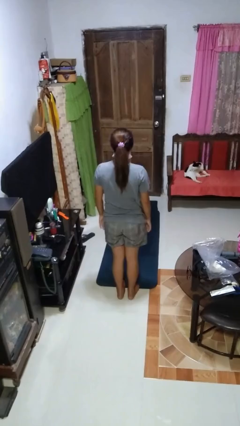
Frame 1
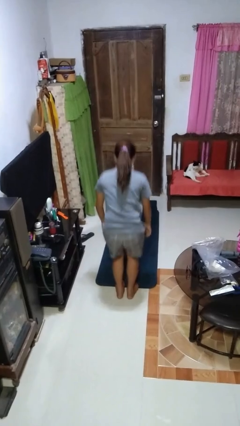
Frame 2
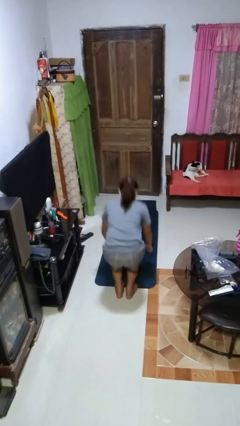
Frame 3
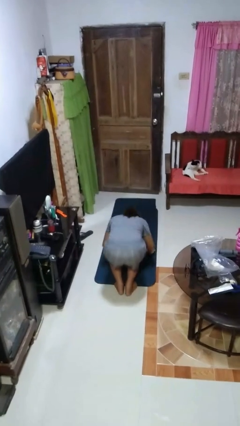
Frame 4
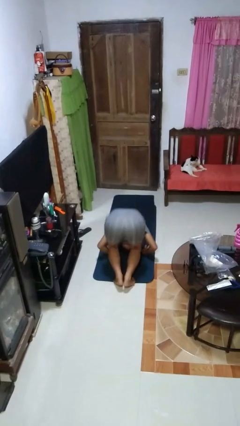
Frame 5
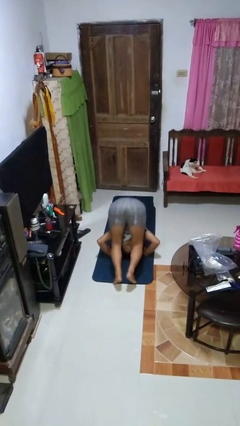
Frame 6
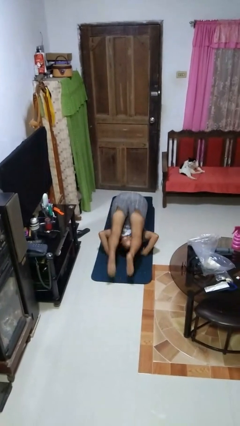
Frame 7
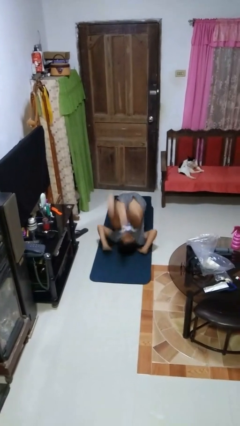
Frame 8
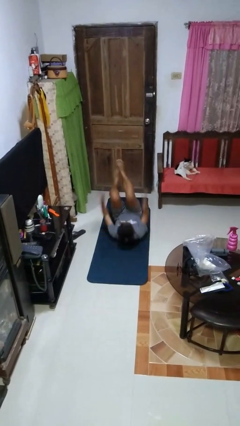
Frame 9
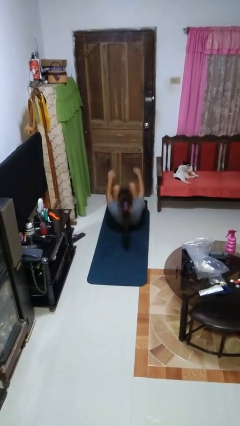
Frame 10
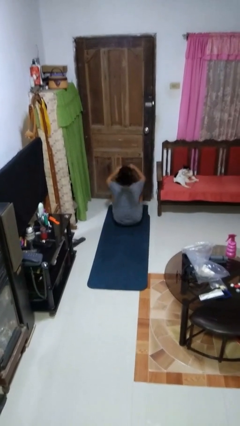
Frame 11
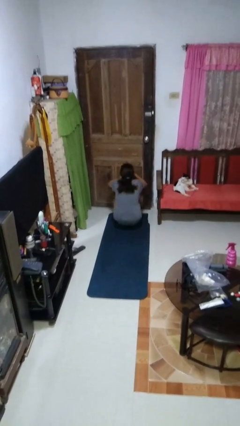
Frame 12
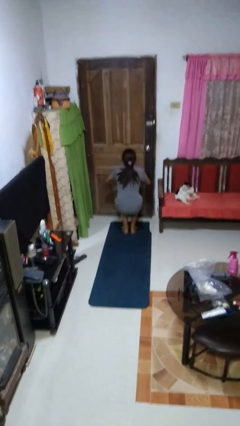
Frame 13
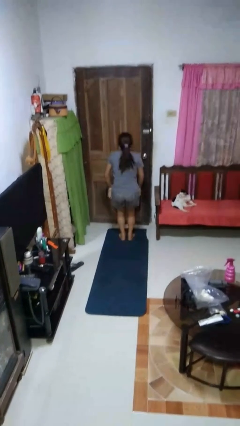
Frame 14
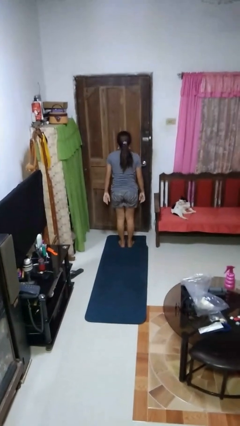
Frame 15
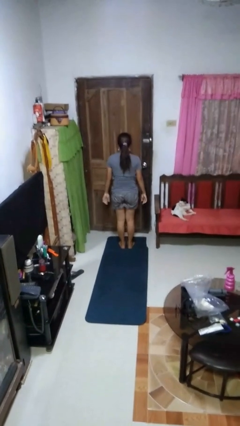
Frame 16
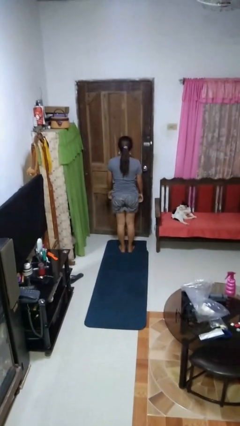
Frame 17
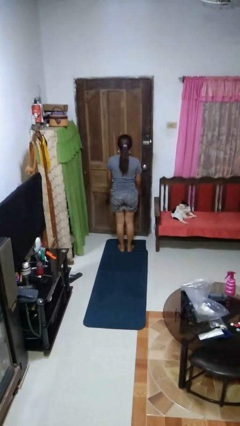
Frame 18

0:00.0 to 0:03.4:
person somersaults

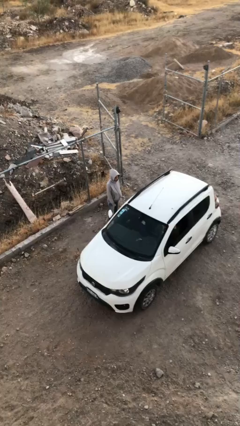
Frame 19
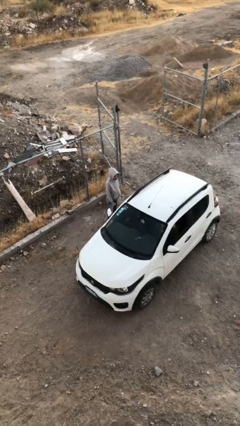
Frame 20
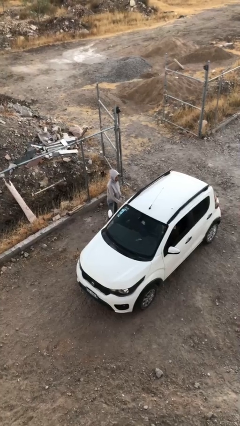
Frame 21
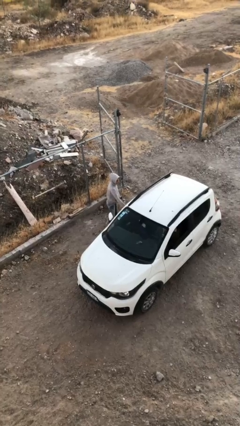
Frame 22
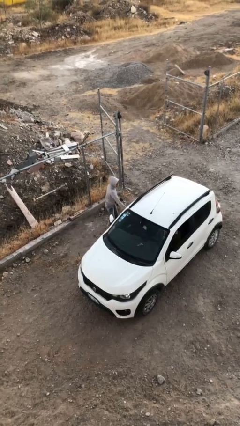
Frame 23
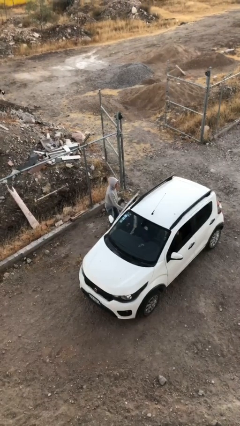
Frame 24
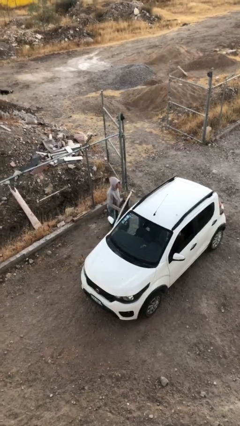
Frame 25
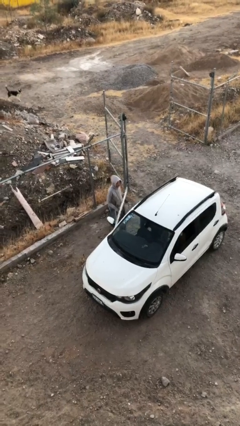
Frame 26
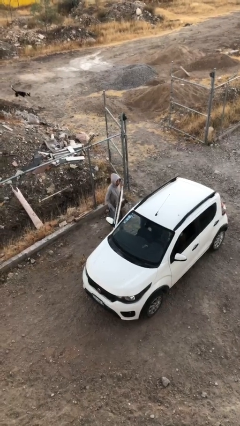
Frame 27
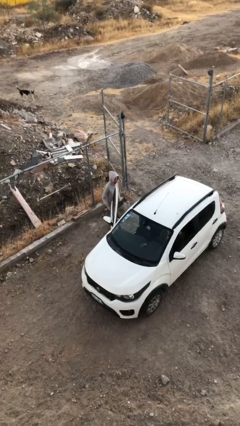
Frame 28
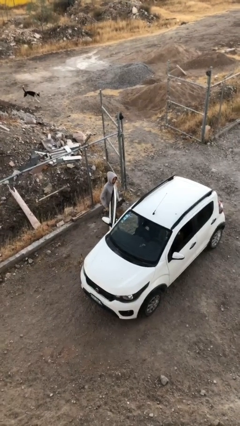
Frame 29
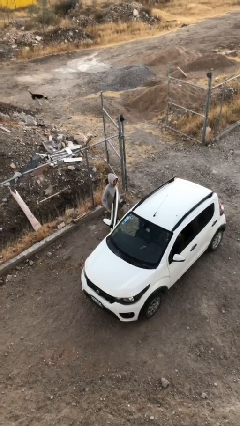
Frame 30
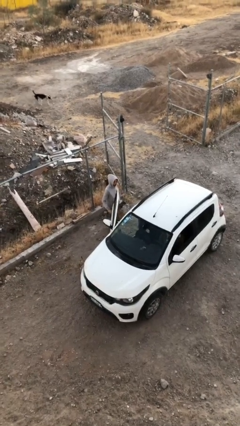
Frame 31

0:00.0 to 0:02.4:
person opens car door

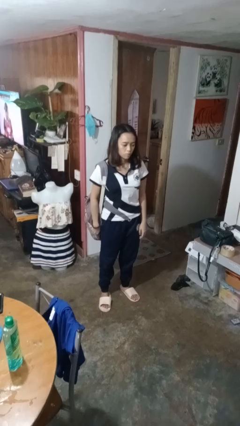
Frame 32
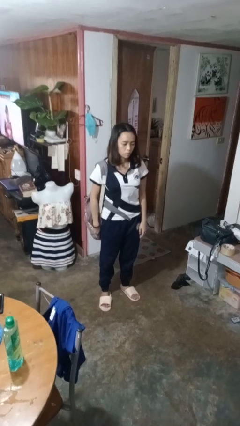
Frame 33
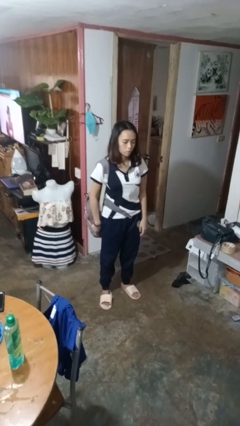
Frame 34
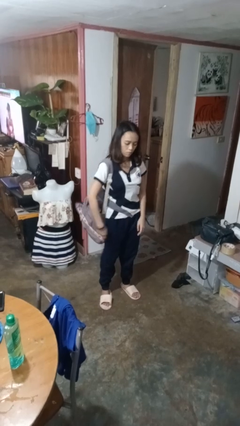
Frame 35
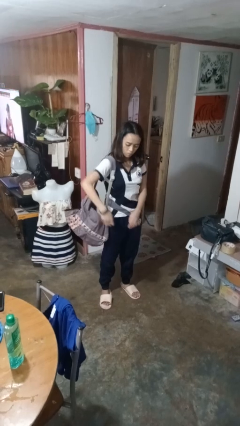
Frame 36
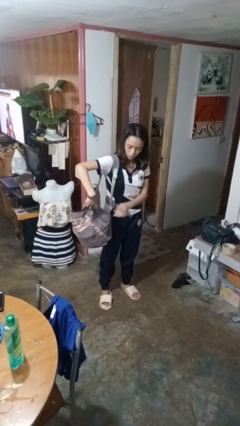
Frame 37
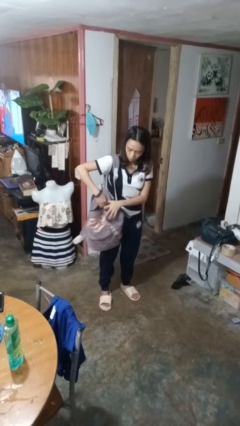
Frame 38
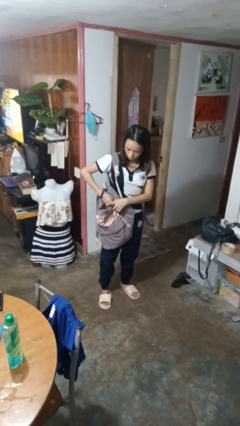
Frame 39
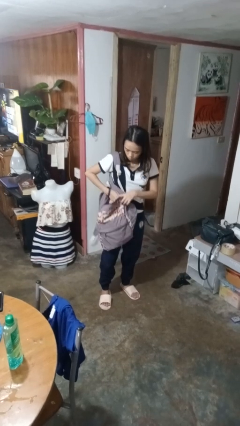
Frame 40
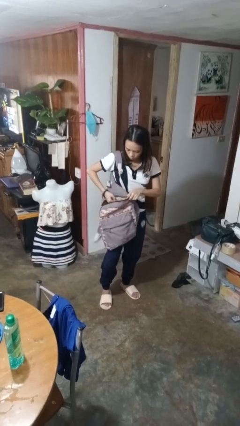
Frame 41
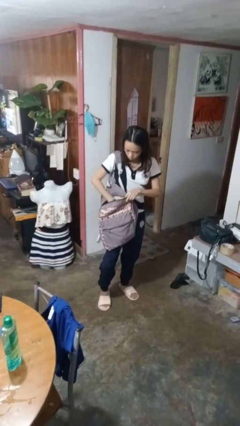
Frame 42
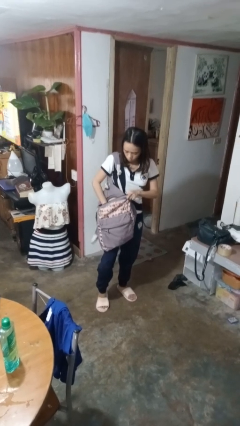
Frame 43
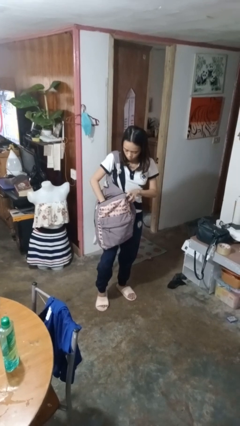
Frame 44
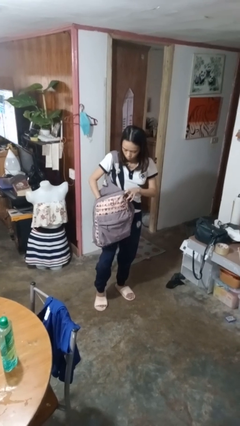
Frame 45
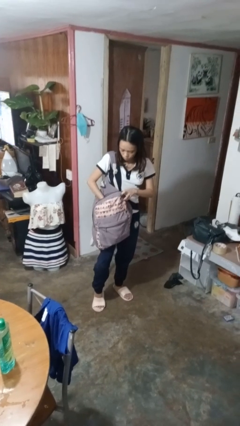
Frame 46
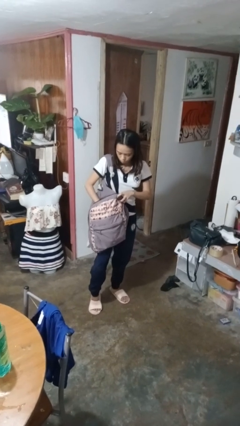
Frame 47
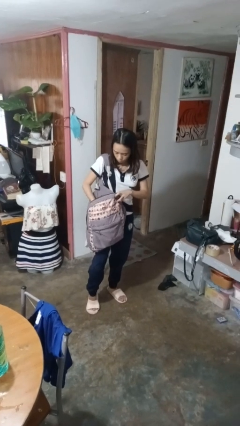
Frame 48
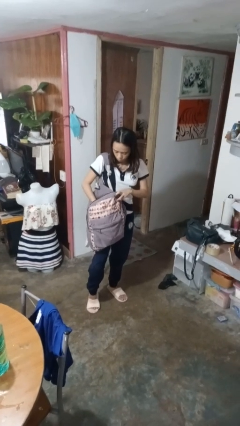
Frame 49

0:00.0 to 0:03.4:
person searches in backpack

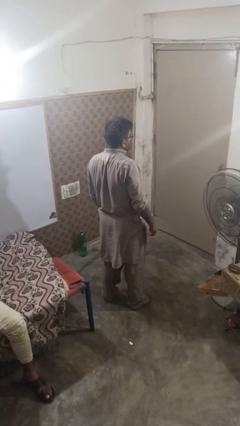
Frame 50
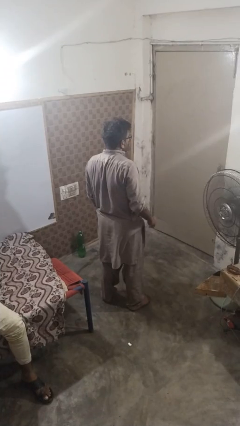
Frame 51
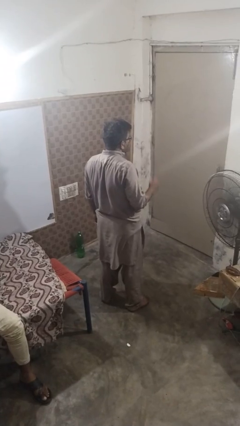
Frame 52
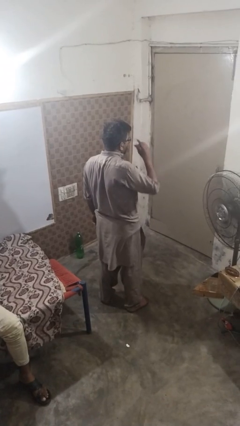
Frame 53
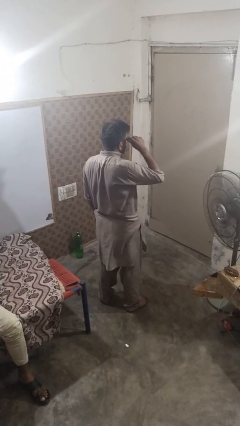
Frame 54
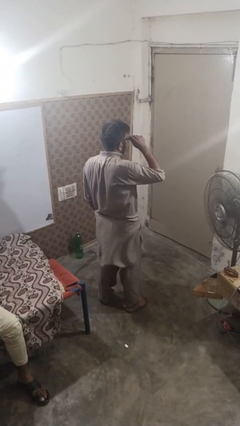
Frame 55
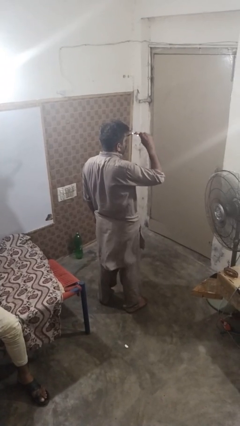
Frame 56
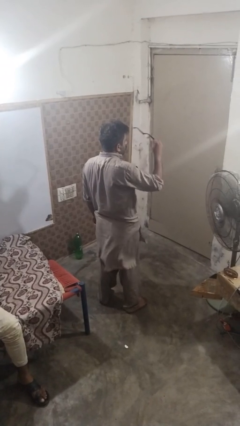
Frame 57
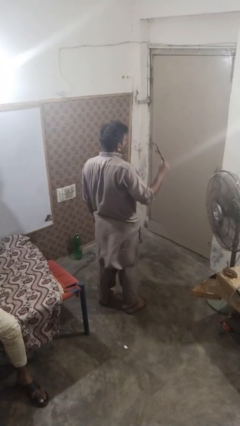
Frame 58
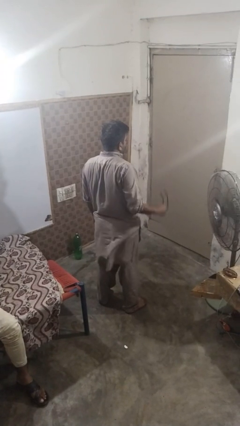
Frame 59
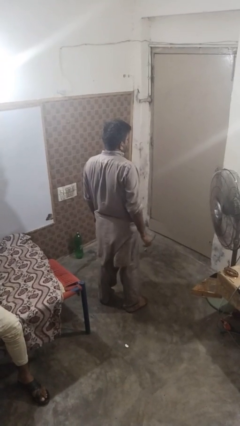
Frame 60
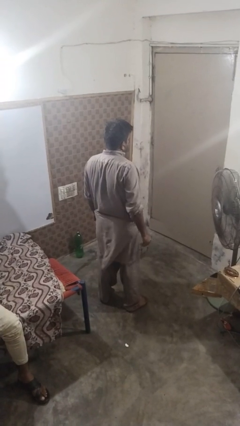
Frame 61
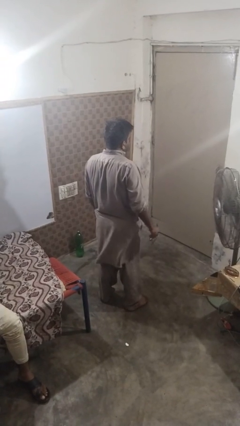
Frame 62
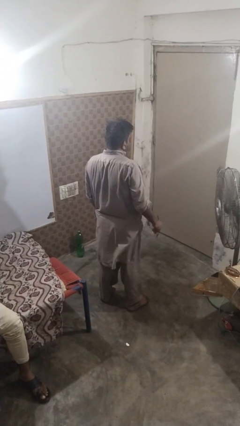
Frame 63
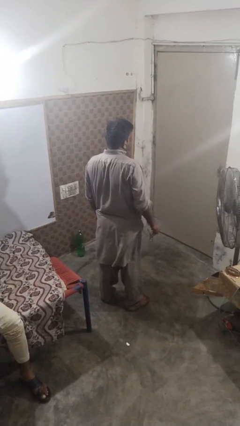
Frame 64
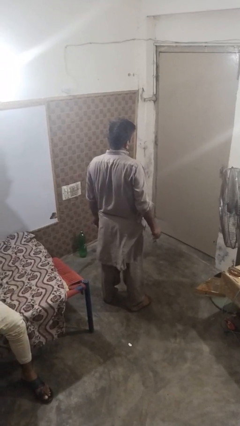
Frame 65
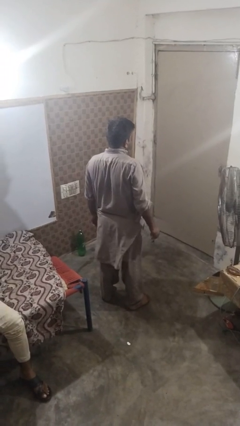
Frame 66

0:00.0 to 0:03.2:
person takes off glasses

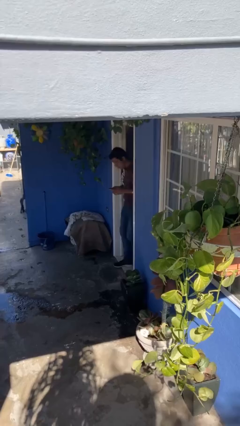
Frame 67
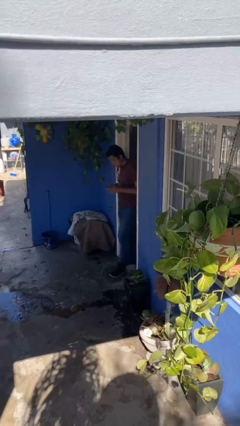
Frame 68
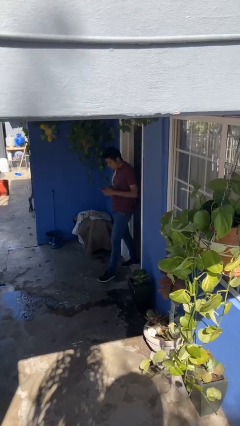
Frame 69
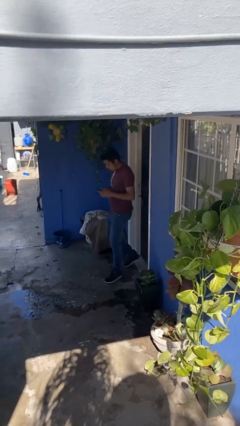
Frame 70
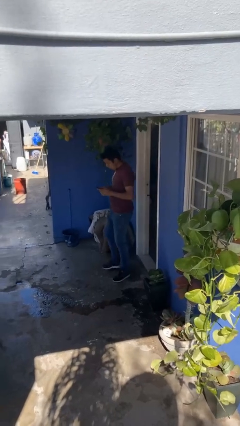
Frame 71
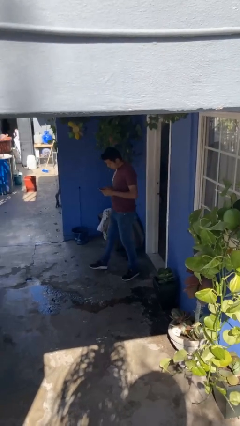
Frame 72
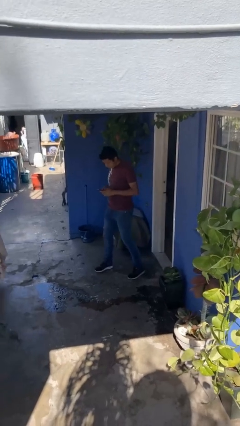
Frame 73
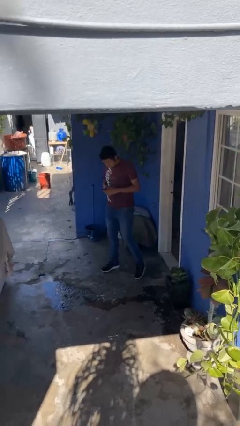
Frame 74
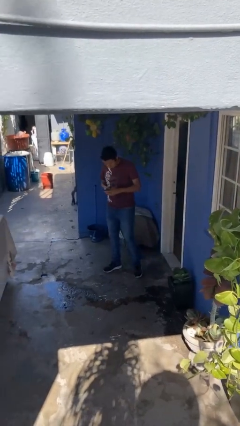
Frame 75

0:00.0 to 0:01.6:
person enters scene through structure

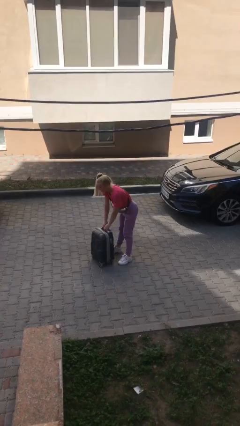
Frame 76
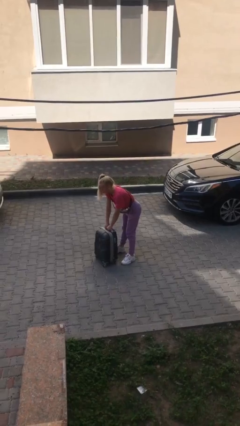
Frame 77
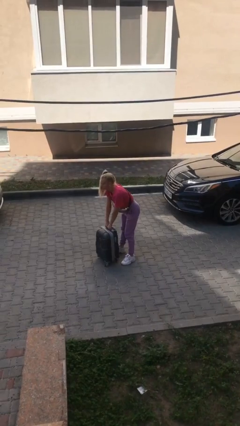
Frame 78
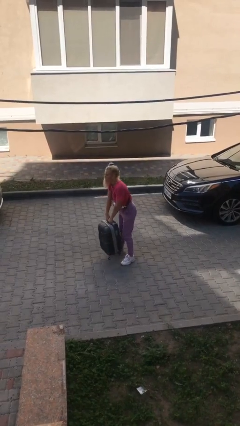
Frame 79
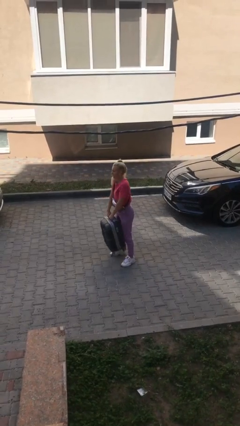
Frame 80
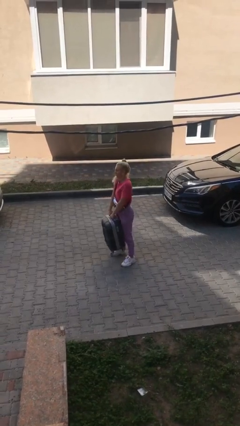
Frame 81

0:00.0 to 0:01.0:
person picks up object from floor

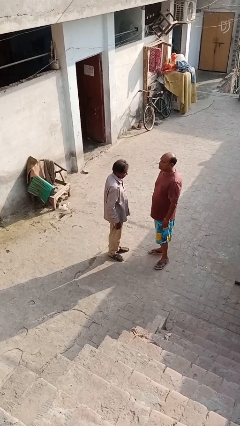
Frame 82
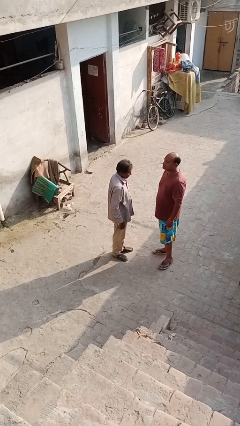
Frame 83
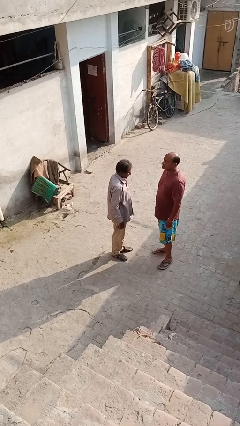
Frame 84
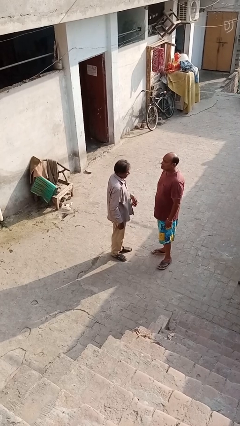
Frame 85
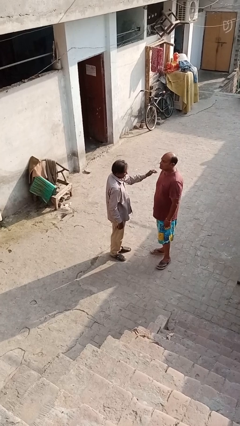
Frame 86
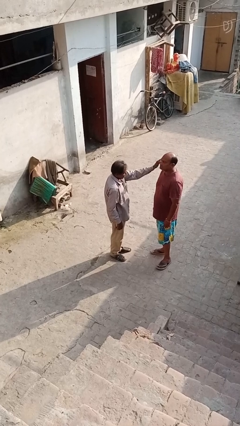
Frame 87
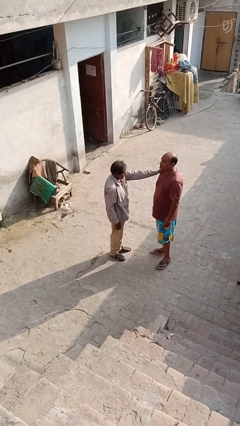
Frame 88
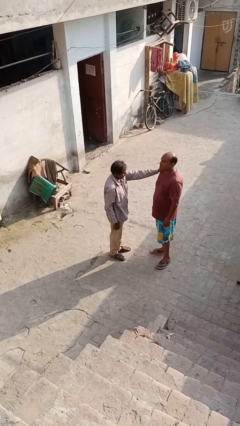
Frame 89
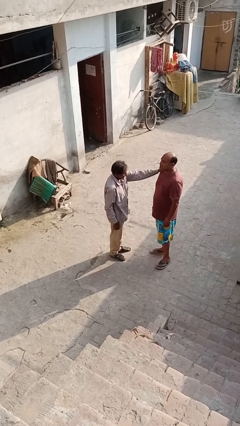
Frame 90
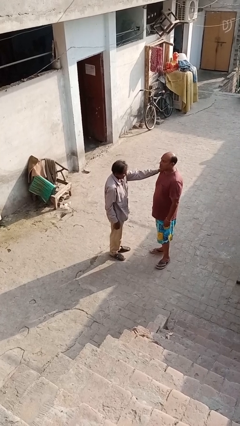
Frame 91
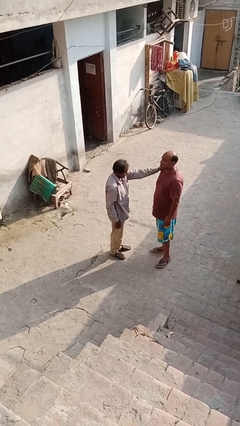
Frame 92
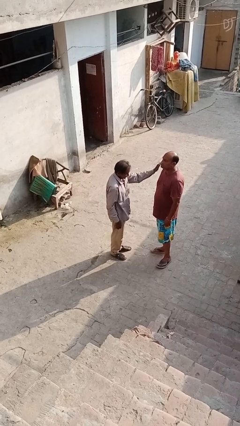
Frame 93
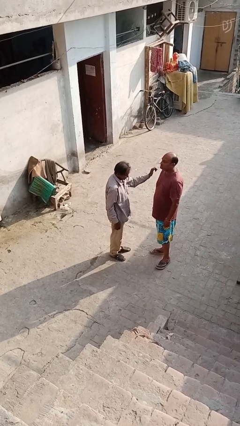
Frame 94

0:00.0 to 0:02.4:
person pounds shoulders of person
